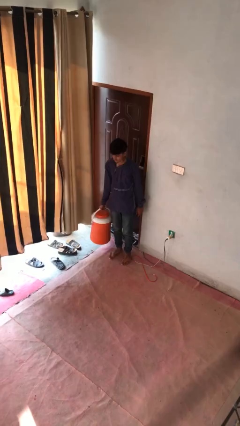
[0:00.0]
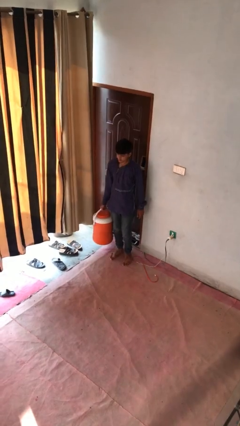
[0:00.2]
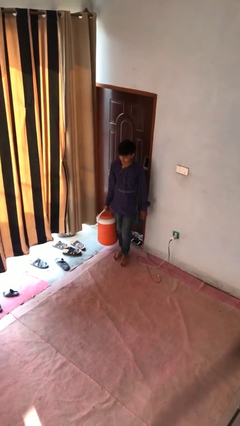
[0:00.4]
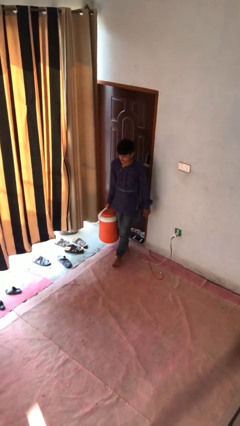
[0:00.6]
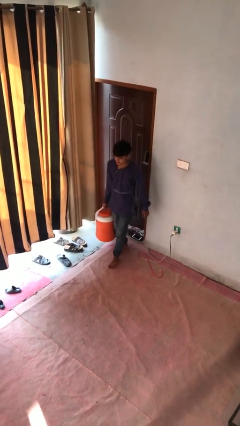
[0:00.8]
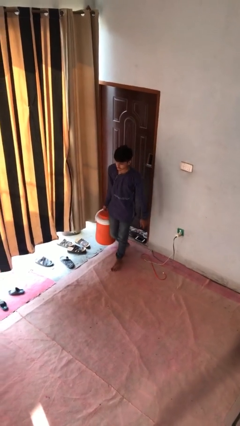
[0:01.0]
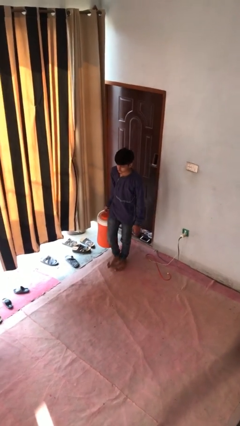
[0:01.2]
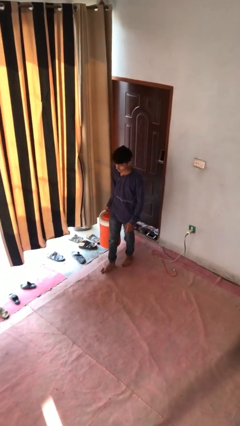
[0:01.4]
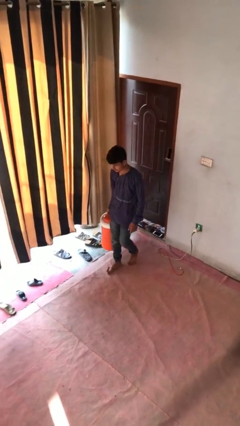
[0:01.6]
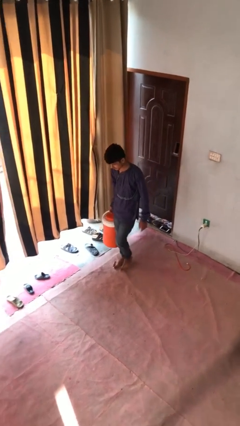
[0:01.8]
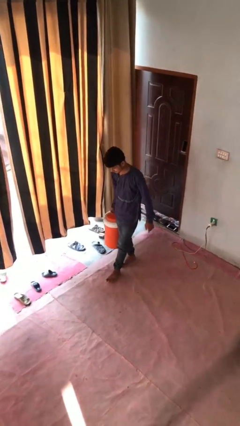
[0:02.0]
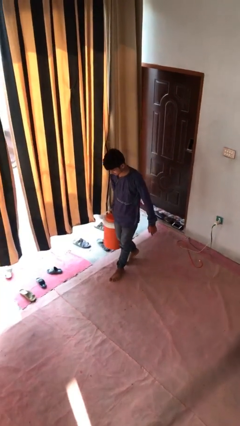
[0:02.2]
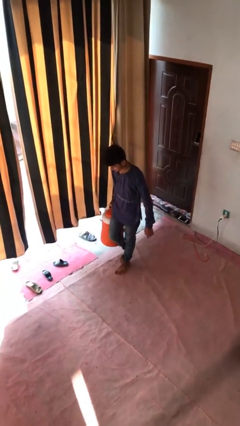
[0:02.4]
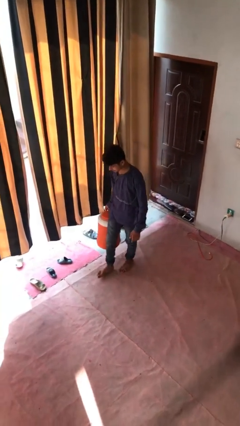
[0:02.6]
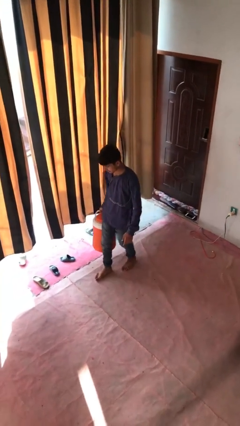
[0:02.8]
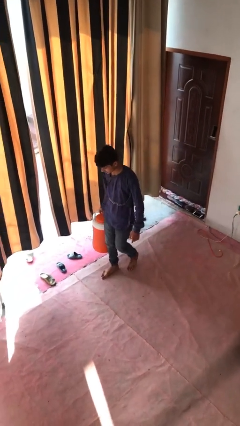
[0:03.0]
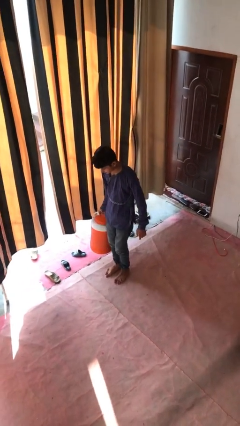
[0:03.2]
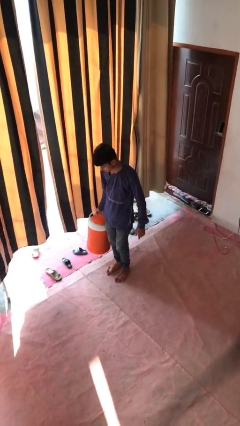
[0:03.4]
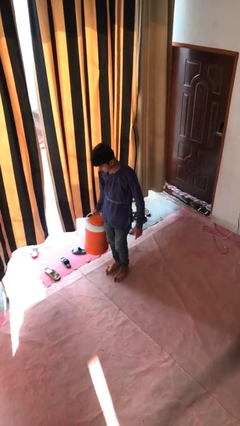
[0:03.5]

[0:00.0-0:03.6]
person carries heavy object

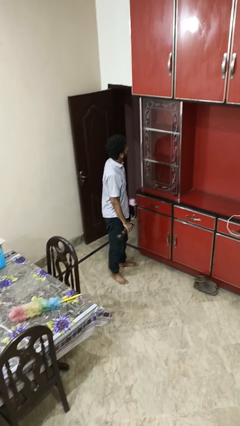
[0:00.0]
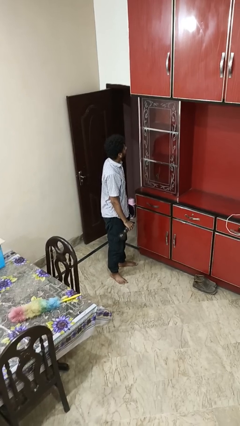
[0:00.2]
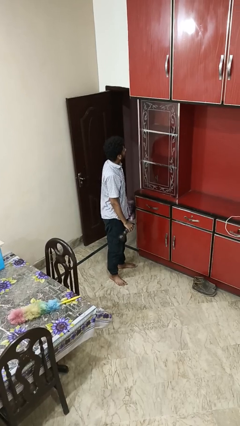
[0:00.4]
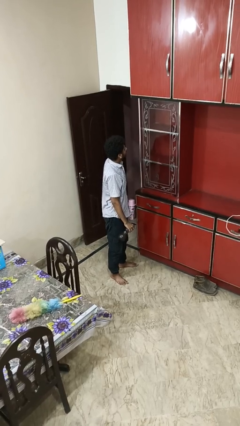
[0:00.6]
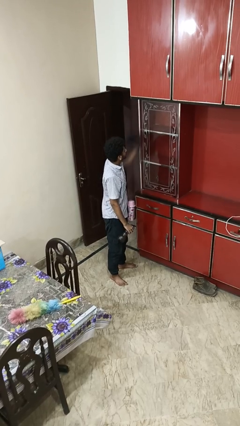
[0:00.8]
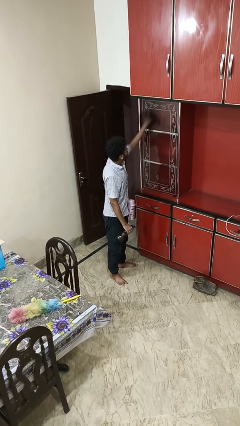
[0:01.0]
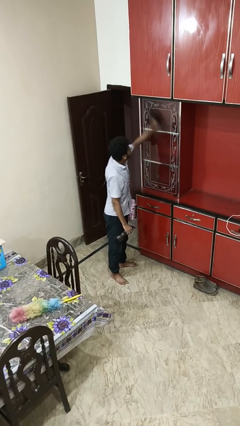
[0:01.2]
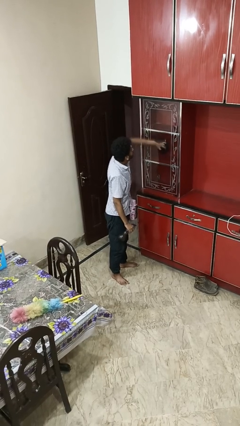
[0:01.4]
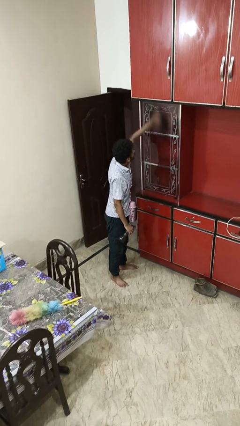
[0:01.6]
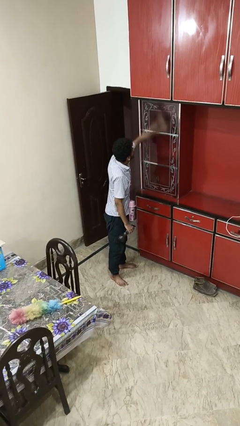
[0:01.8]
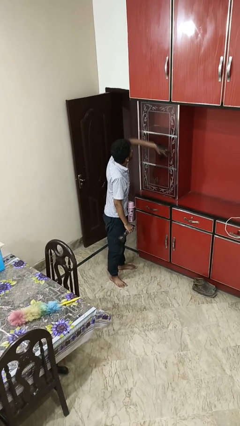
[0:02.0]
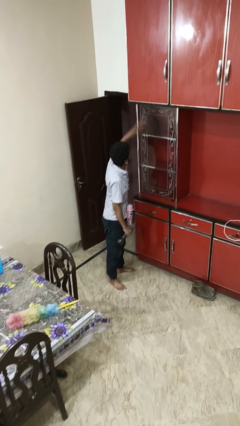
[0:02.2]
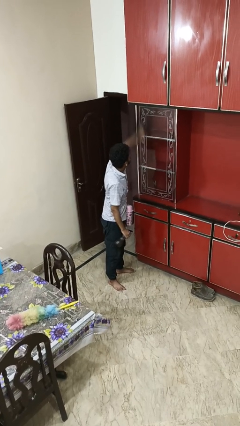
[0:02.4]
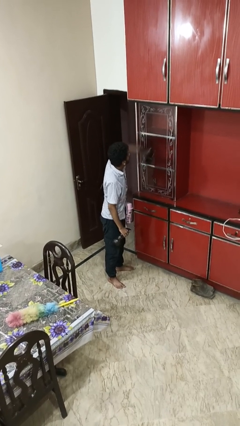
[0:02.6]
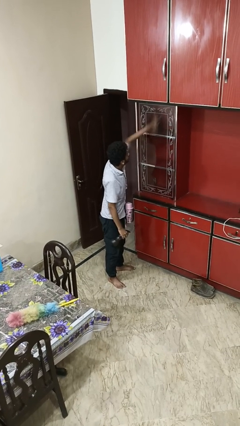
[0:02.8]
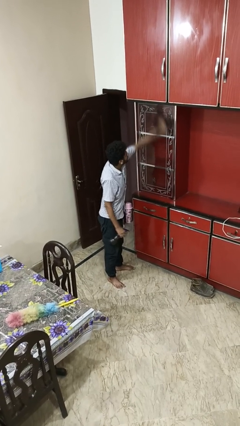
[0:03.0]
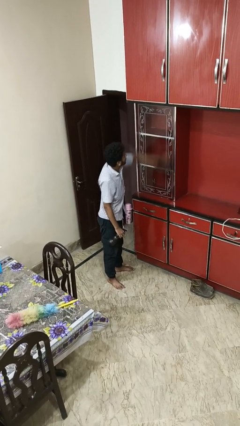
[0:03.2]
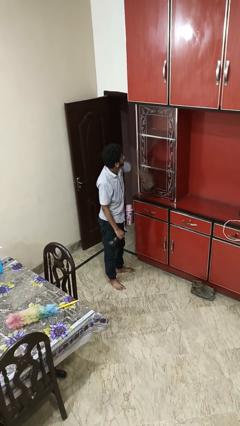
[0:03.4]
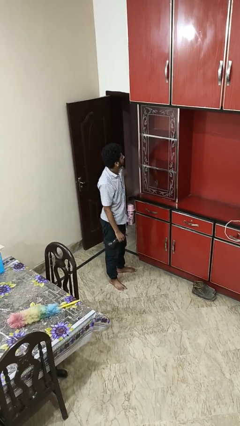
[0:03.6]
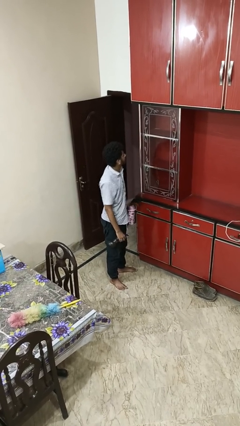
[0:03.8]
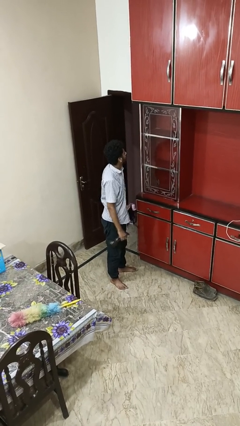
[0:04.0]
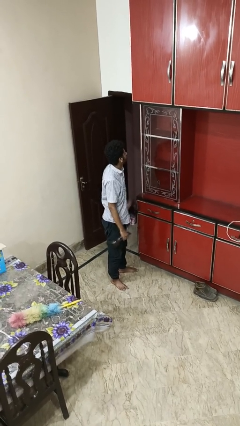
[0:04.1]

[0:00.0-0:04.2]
person washes window

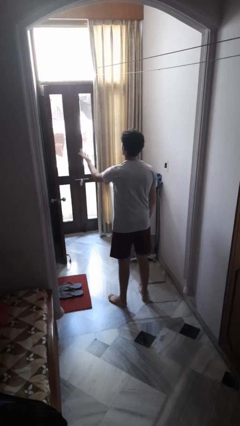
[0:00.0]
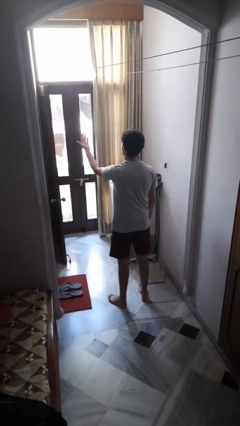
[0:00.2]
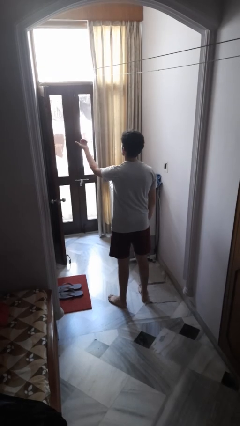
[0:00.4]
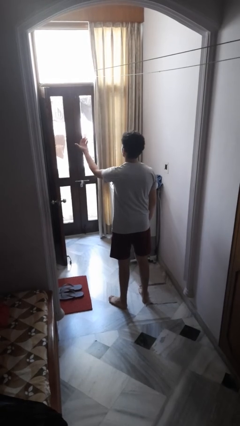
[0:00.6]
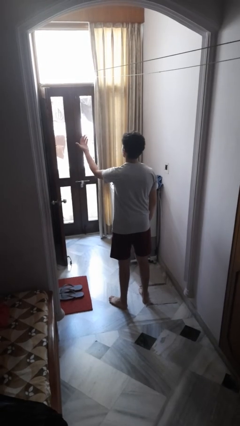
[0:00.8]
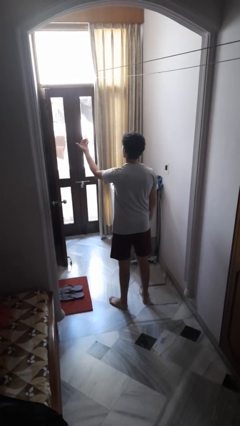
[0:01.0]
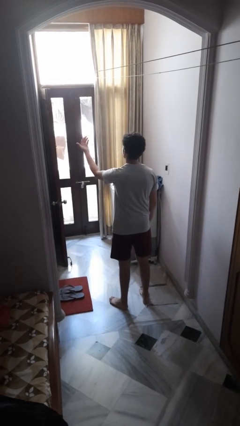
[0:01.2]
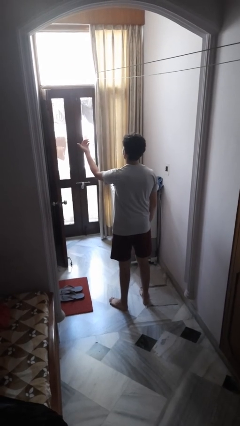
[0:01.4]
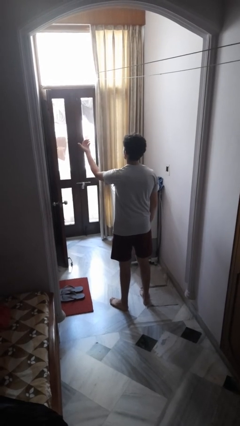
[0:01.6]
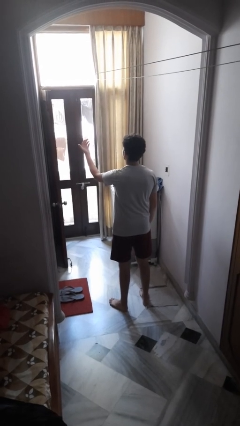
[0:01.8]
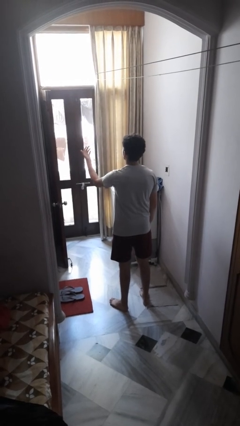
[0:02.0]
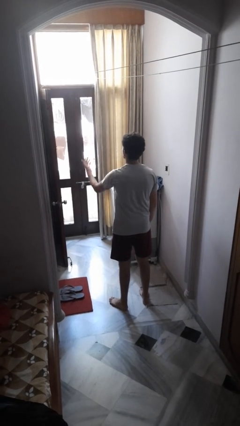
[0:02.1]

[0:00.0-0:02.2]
person gestures come here

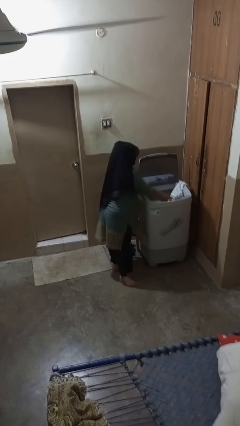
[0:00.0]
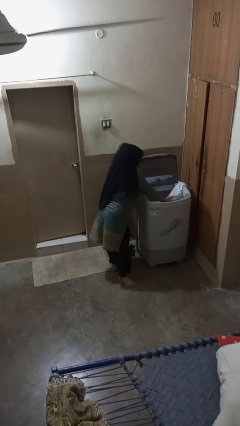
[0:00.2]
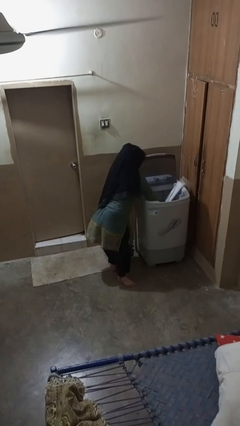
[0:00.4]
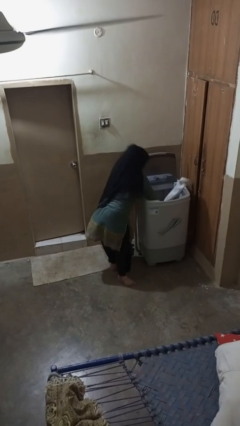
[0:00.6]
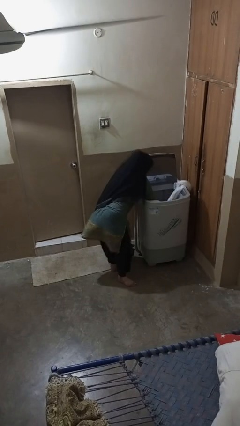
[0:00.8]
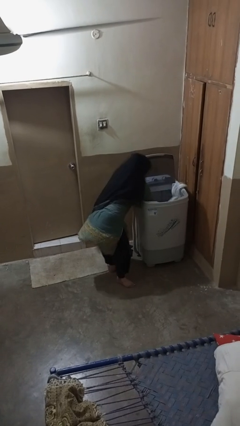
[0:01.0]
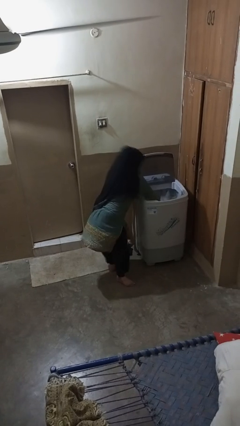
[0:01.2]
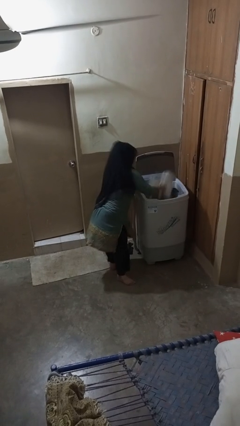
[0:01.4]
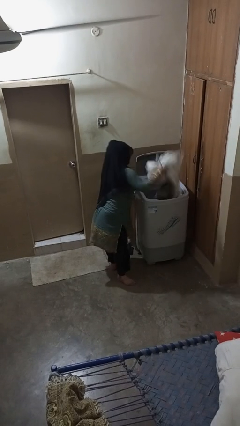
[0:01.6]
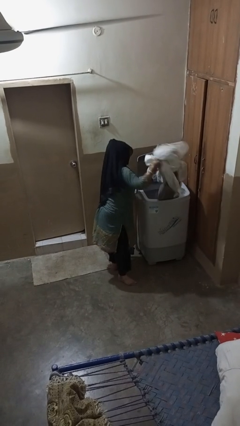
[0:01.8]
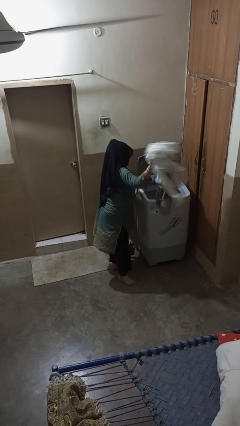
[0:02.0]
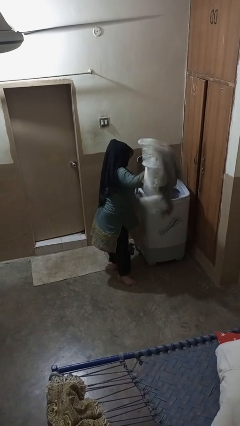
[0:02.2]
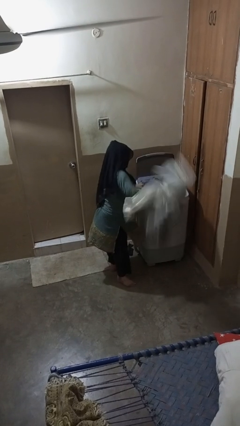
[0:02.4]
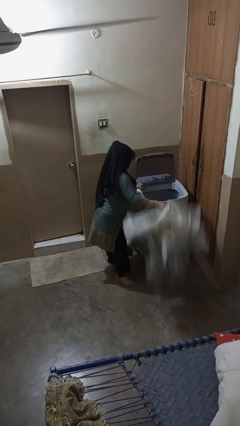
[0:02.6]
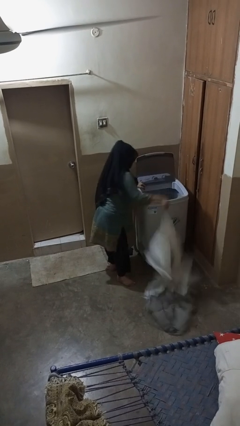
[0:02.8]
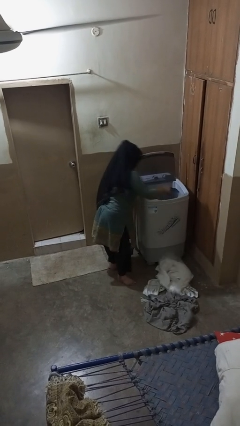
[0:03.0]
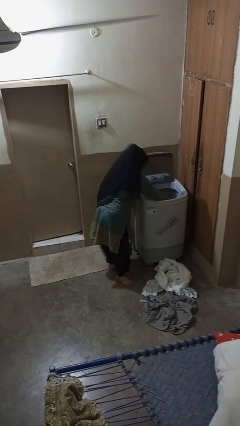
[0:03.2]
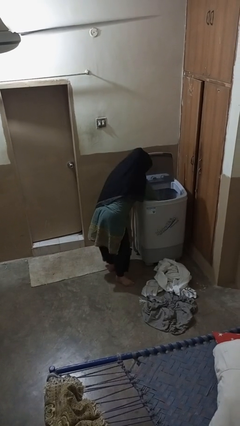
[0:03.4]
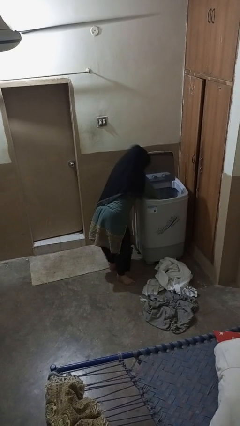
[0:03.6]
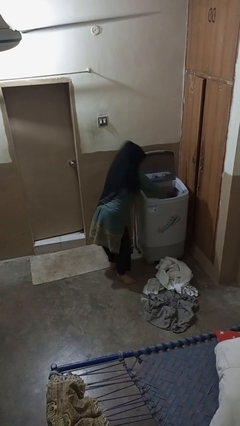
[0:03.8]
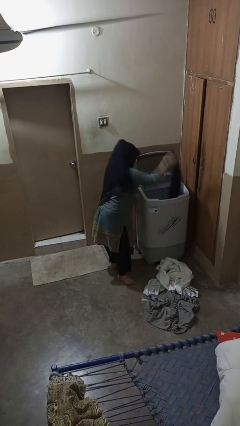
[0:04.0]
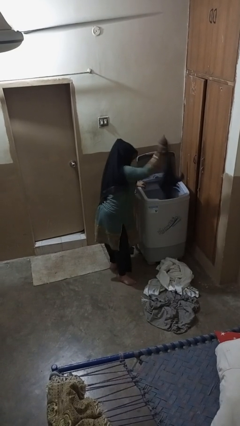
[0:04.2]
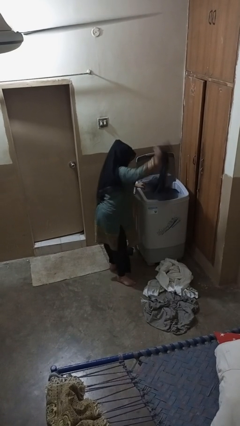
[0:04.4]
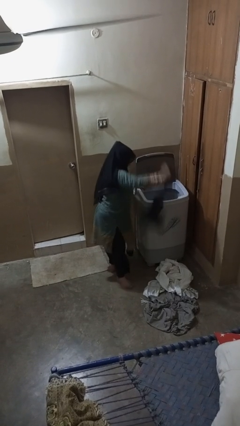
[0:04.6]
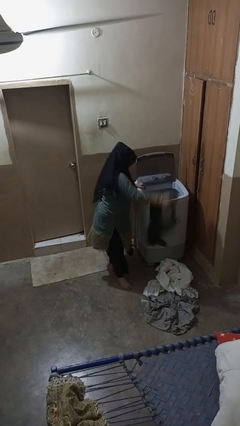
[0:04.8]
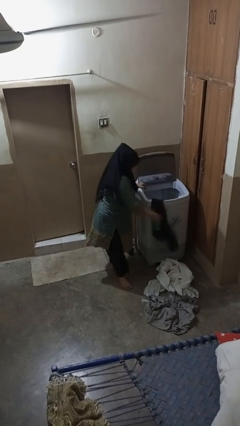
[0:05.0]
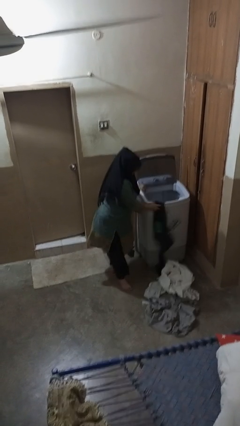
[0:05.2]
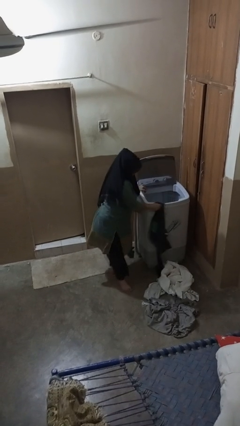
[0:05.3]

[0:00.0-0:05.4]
person unloads clotheswasher

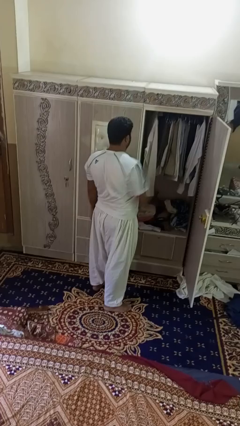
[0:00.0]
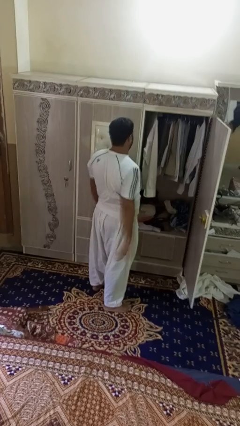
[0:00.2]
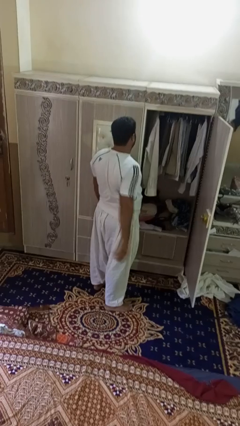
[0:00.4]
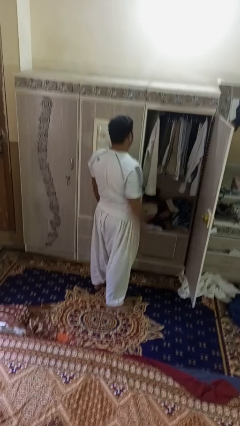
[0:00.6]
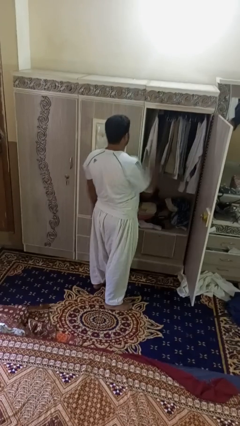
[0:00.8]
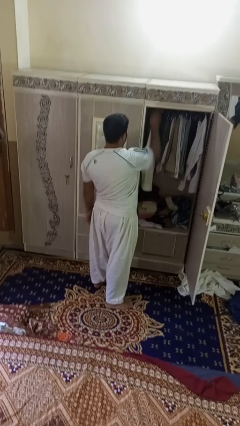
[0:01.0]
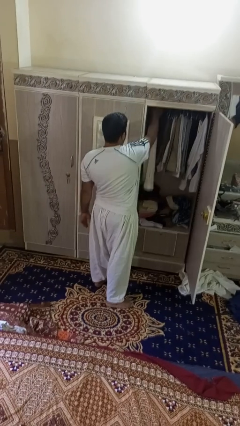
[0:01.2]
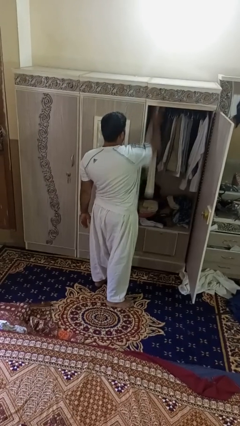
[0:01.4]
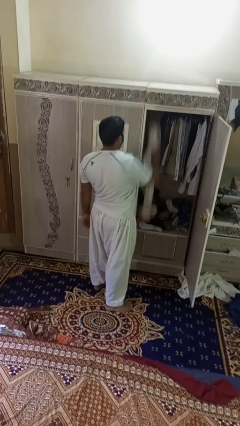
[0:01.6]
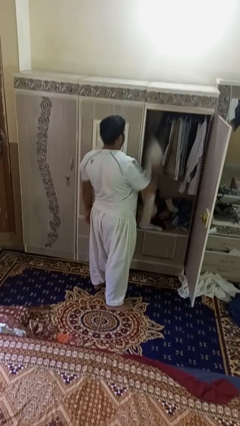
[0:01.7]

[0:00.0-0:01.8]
person takes clothes from closet
